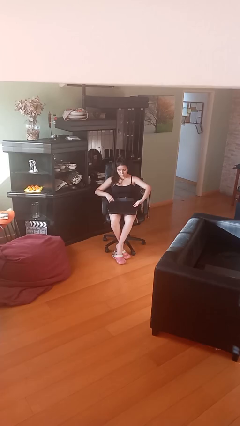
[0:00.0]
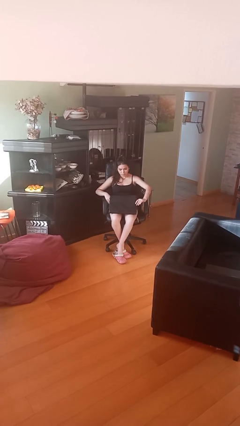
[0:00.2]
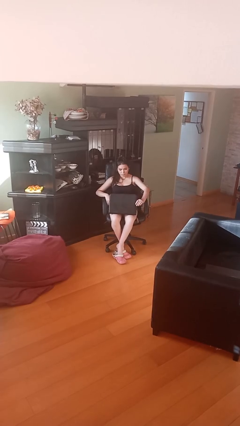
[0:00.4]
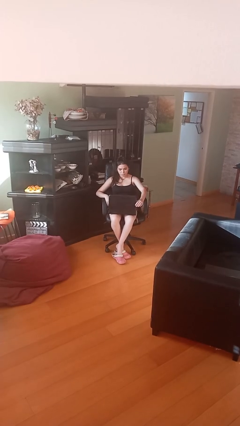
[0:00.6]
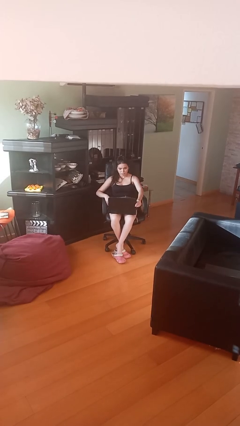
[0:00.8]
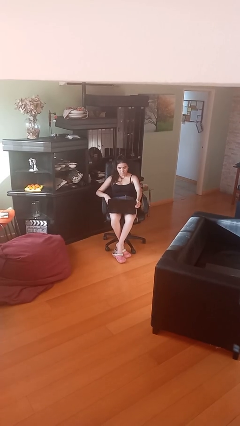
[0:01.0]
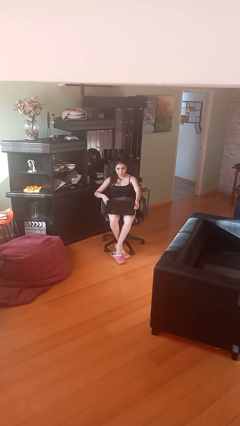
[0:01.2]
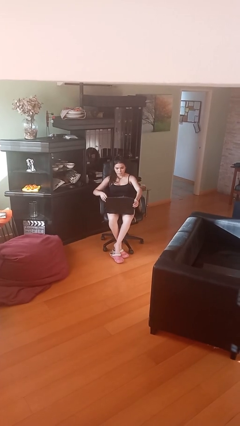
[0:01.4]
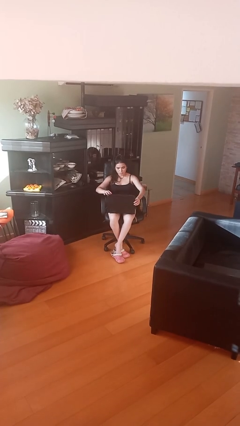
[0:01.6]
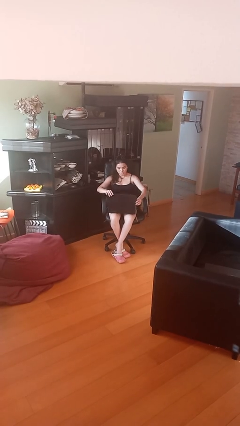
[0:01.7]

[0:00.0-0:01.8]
person interacts with laptop

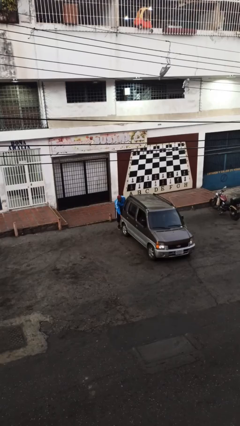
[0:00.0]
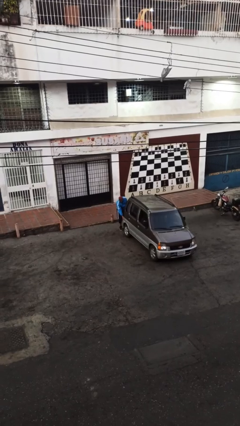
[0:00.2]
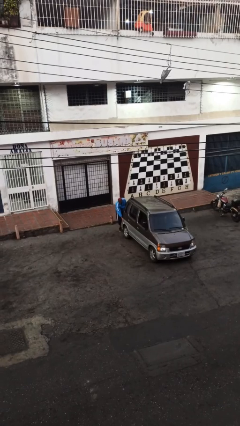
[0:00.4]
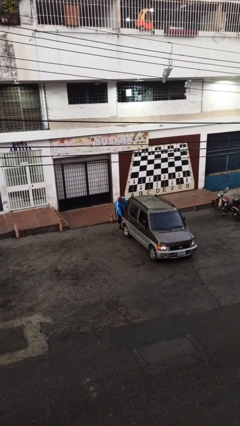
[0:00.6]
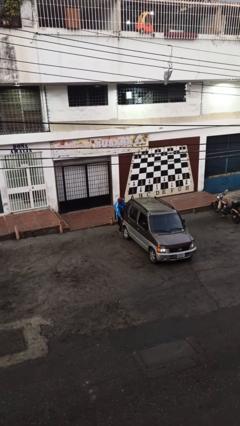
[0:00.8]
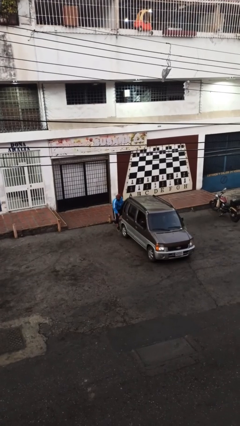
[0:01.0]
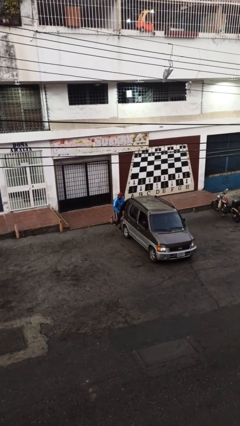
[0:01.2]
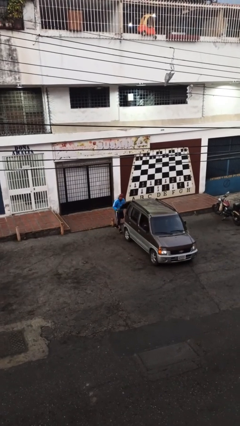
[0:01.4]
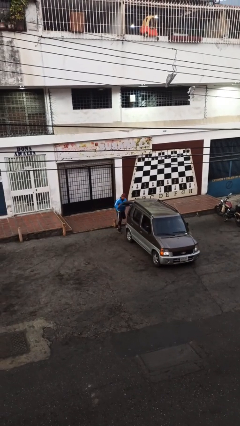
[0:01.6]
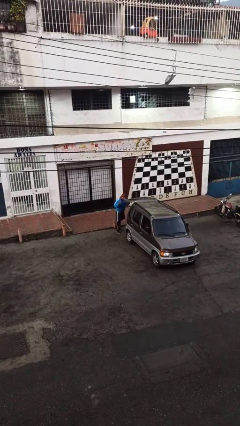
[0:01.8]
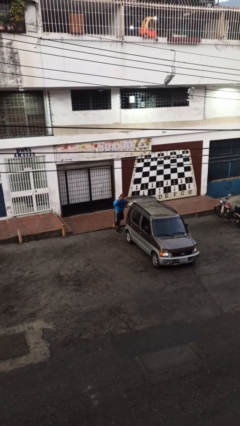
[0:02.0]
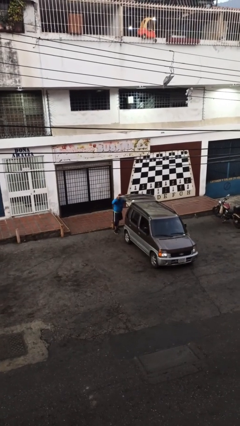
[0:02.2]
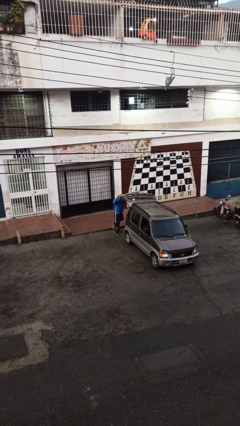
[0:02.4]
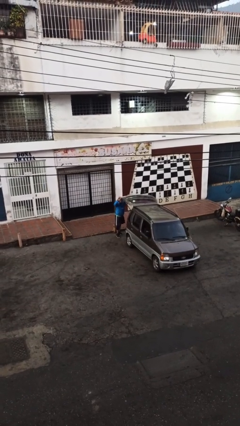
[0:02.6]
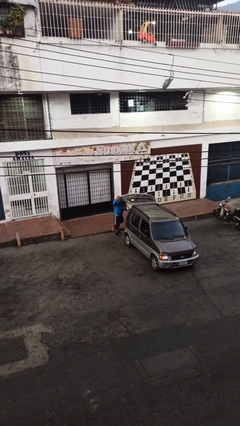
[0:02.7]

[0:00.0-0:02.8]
person opens car trunk

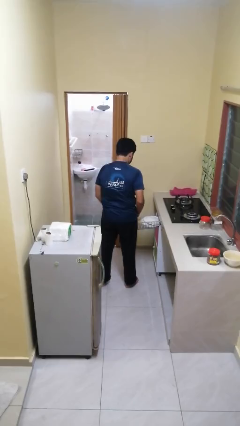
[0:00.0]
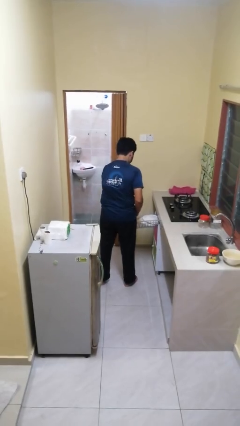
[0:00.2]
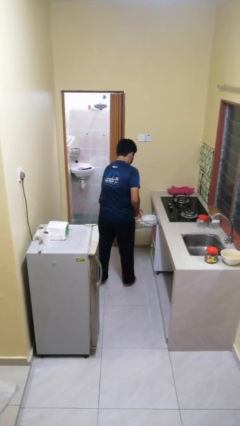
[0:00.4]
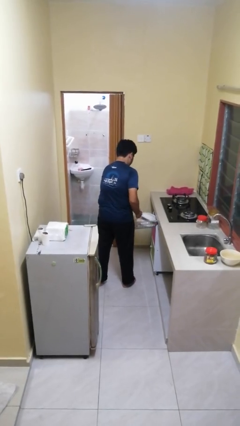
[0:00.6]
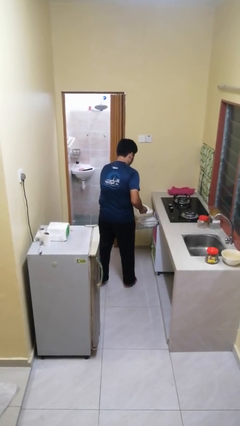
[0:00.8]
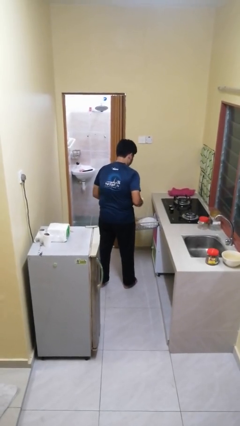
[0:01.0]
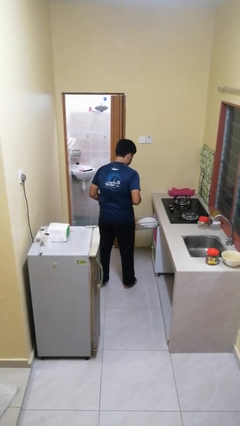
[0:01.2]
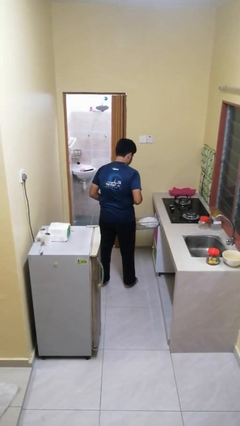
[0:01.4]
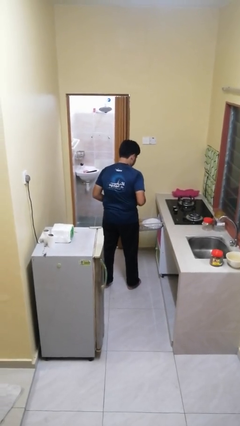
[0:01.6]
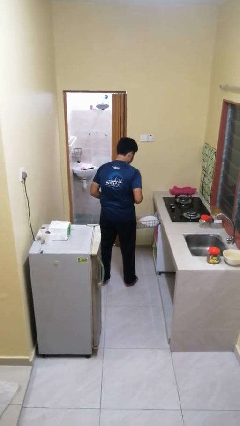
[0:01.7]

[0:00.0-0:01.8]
person takes object from kitchen drawer

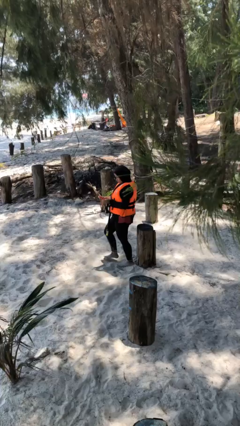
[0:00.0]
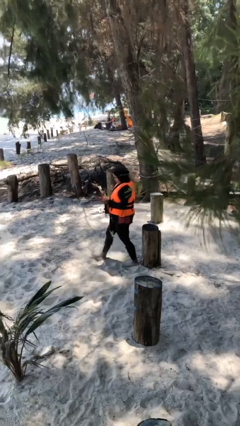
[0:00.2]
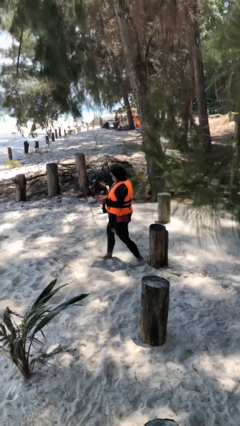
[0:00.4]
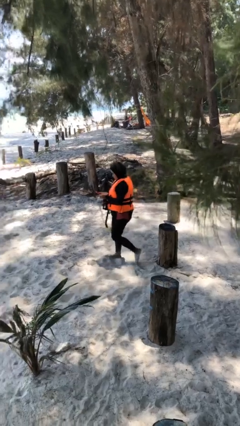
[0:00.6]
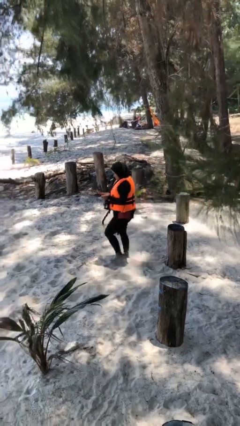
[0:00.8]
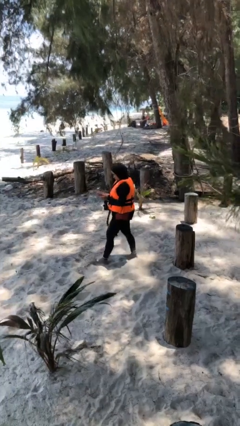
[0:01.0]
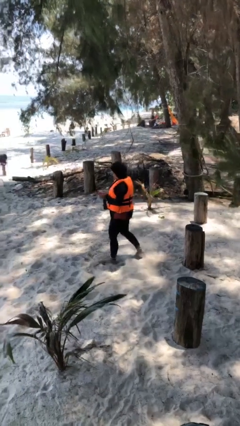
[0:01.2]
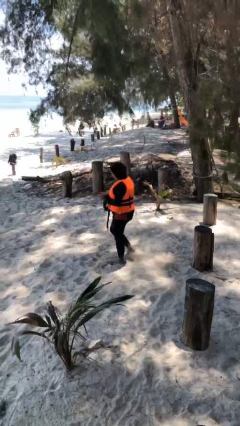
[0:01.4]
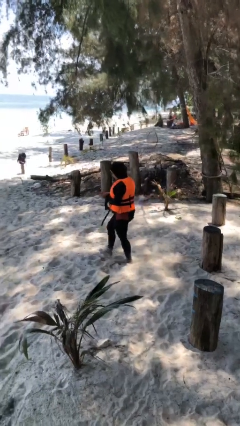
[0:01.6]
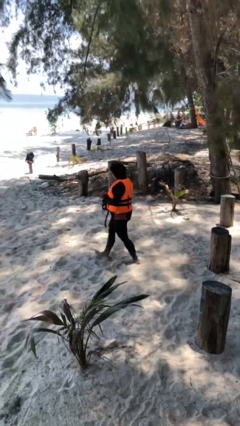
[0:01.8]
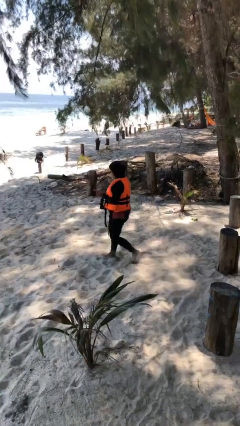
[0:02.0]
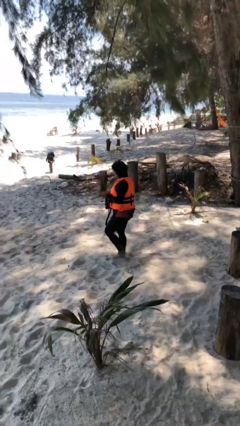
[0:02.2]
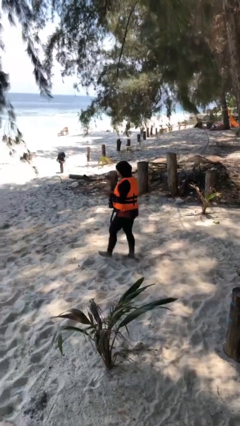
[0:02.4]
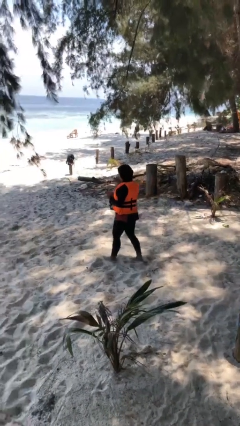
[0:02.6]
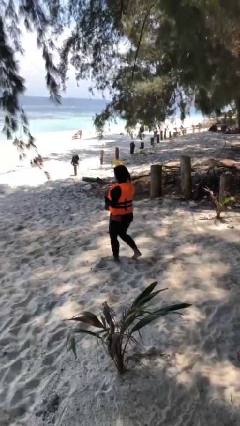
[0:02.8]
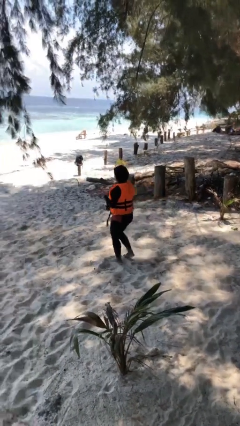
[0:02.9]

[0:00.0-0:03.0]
person texts on phone

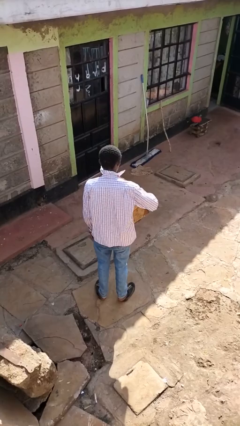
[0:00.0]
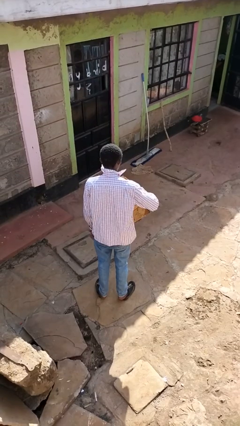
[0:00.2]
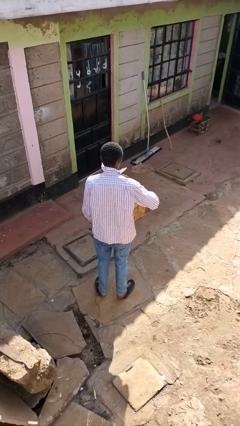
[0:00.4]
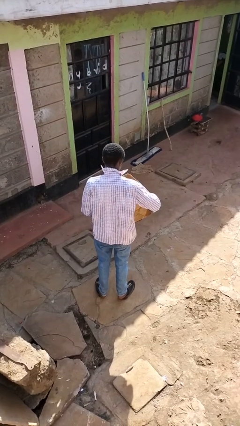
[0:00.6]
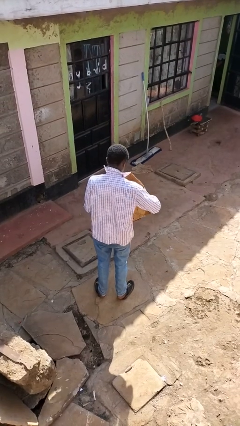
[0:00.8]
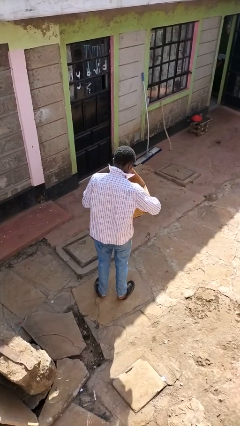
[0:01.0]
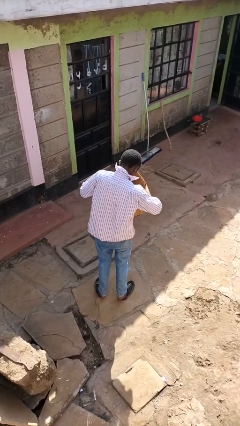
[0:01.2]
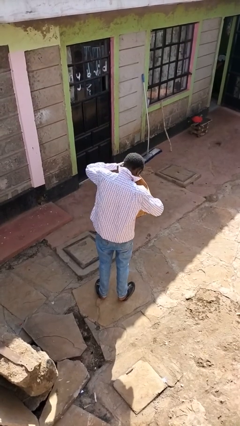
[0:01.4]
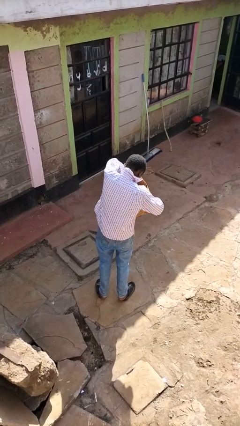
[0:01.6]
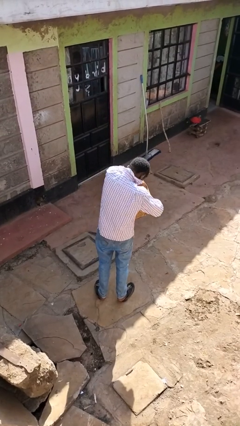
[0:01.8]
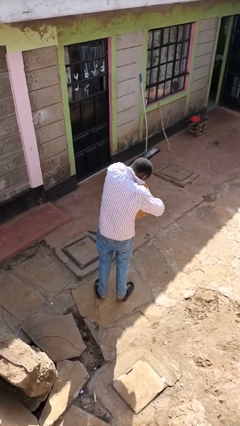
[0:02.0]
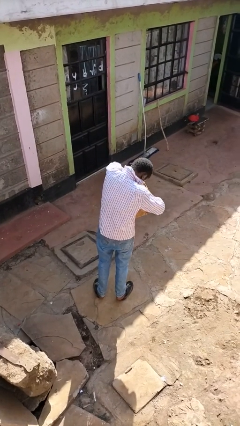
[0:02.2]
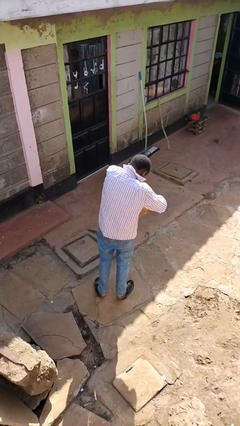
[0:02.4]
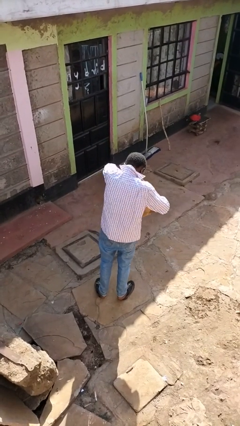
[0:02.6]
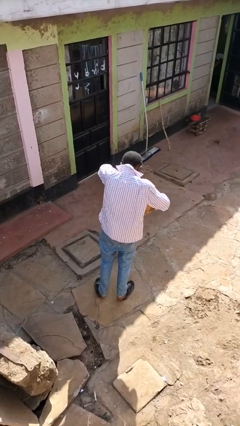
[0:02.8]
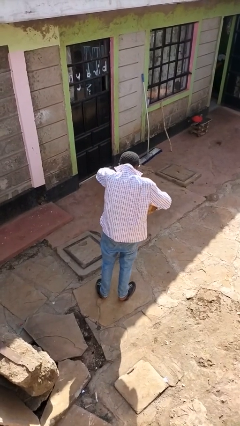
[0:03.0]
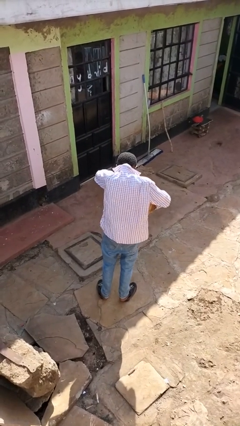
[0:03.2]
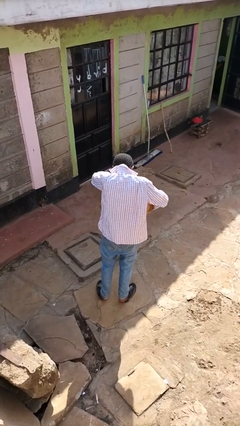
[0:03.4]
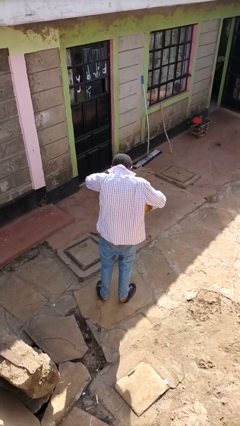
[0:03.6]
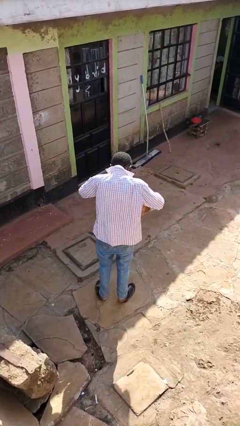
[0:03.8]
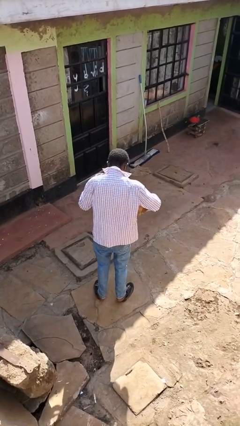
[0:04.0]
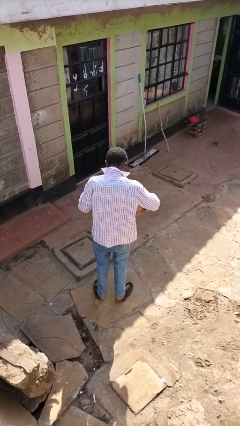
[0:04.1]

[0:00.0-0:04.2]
person searches in box

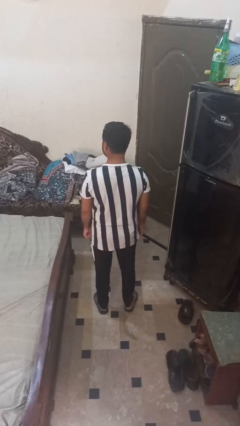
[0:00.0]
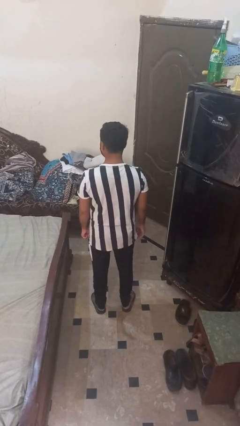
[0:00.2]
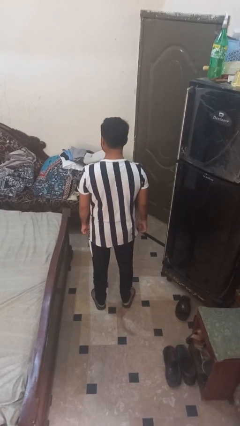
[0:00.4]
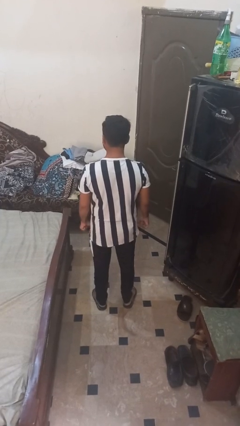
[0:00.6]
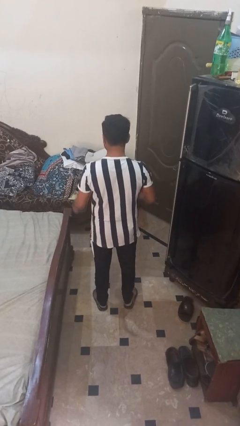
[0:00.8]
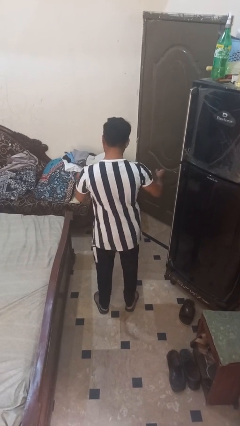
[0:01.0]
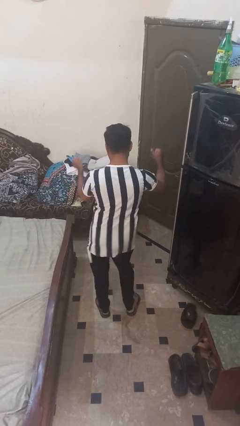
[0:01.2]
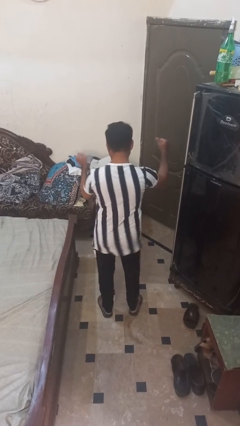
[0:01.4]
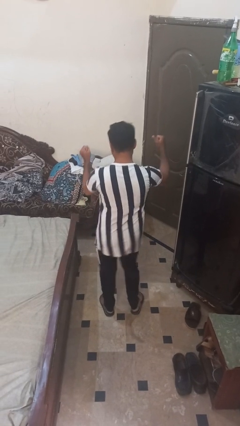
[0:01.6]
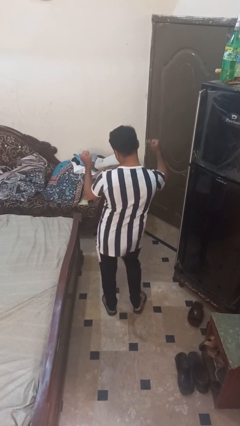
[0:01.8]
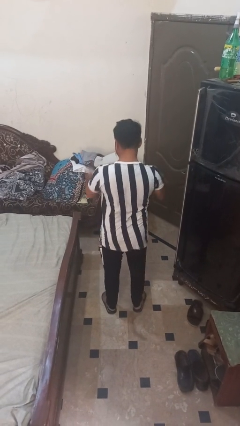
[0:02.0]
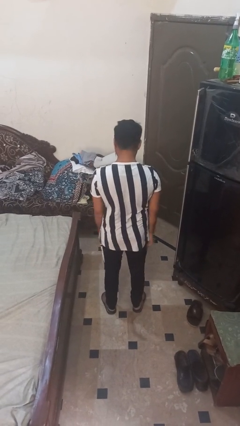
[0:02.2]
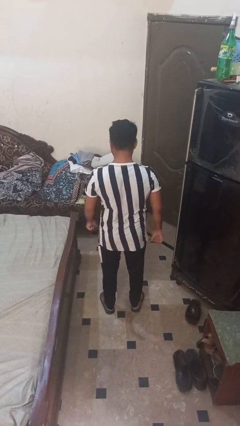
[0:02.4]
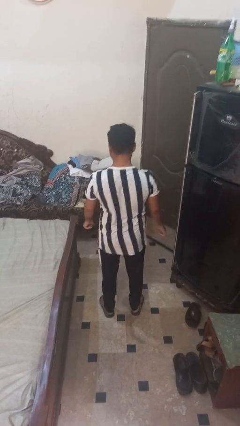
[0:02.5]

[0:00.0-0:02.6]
person wiggles hips

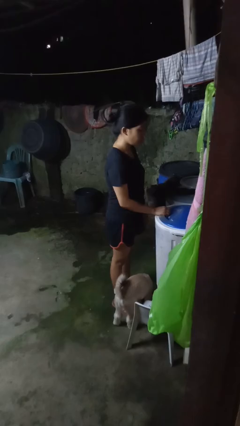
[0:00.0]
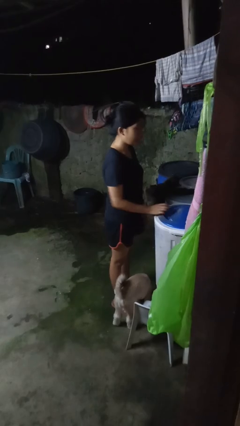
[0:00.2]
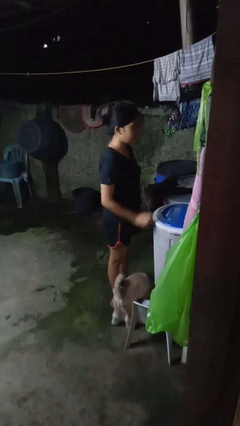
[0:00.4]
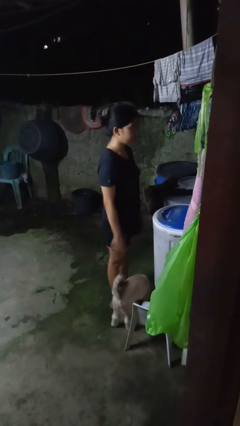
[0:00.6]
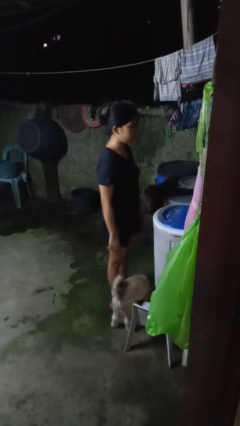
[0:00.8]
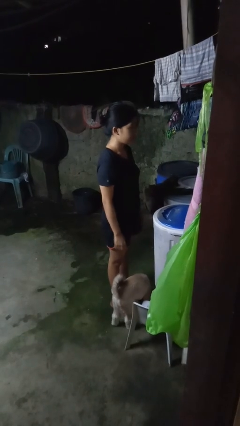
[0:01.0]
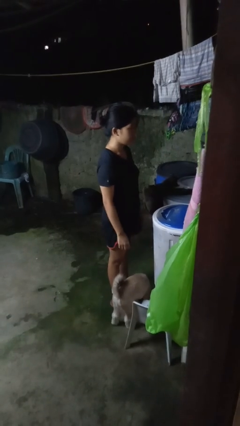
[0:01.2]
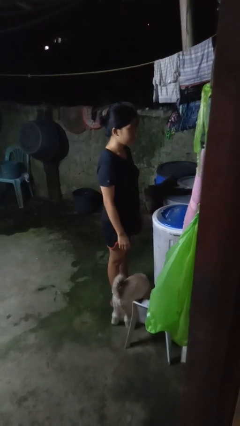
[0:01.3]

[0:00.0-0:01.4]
person closes clothes washer
